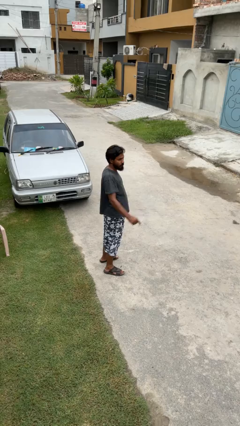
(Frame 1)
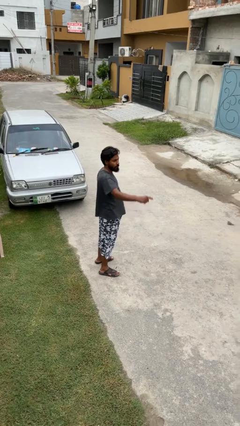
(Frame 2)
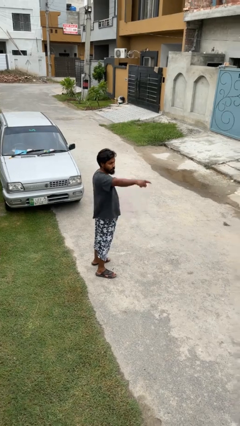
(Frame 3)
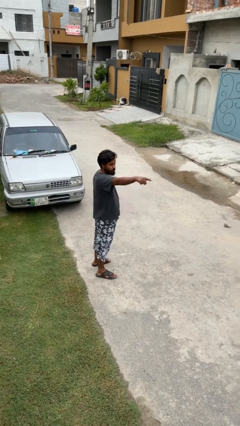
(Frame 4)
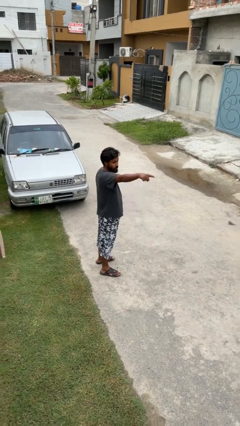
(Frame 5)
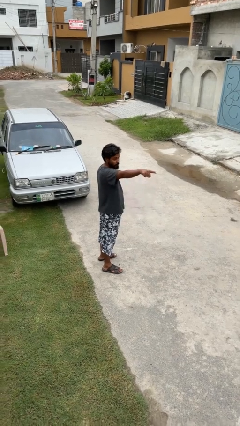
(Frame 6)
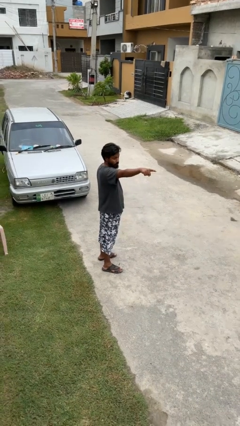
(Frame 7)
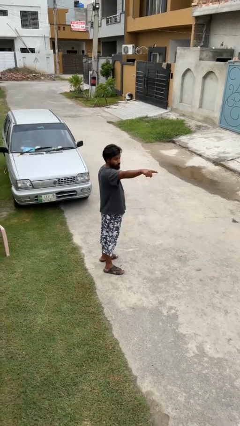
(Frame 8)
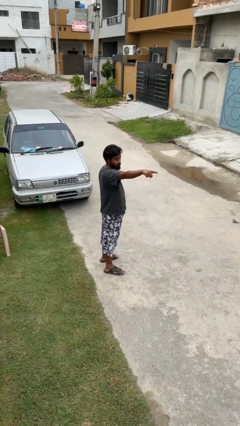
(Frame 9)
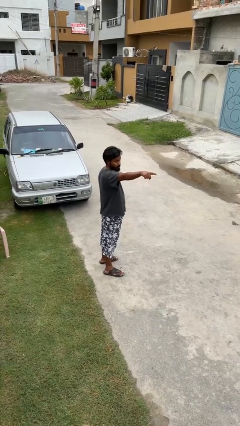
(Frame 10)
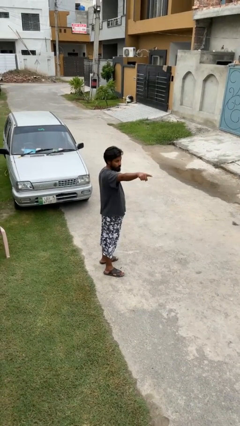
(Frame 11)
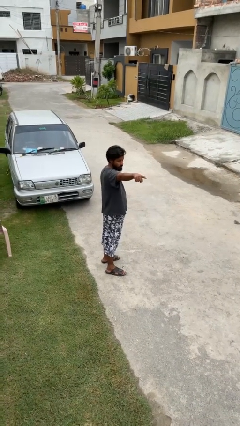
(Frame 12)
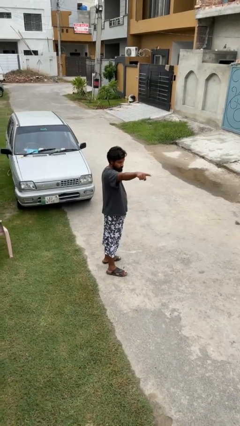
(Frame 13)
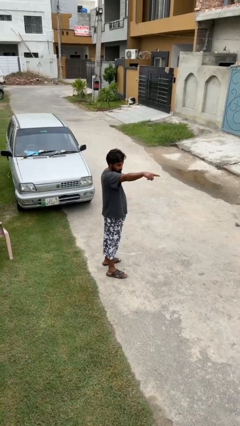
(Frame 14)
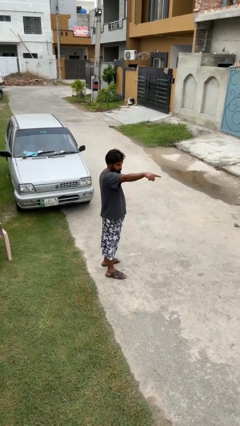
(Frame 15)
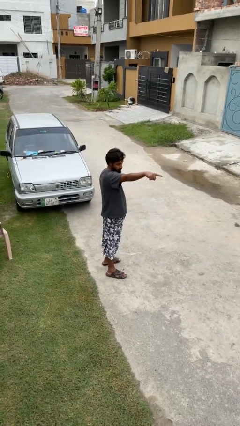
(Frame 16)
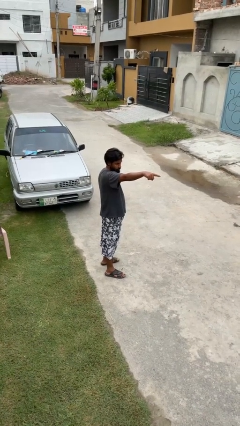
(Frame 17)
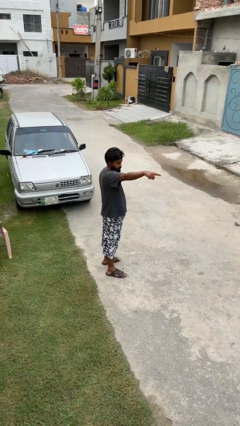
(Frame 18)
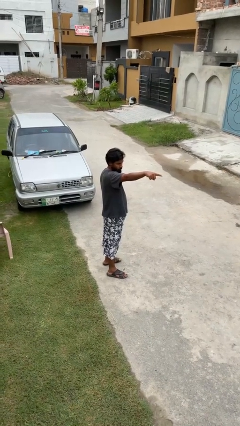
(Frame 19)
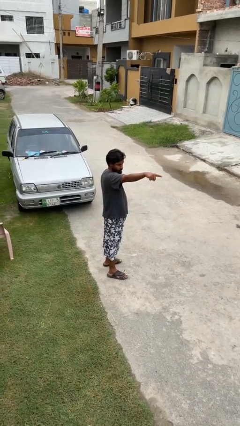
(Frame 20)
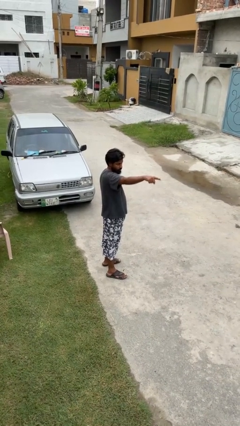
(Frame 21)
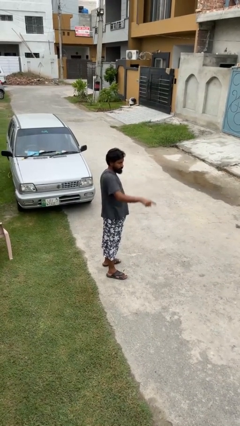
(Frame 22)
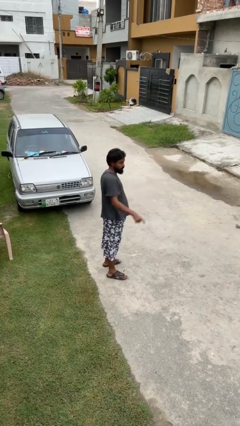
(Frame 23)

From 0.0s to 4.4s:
person points at person

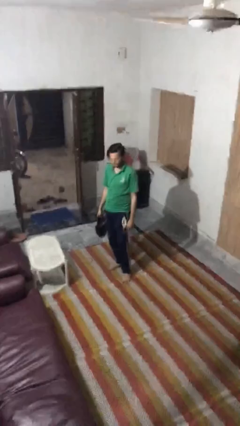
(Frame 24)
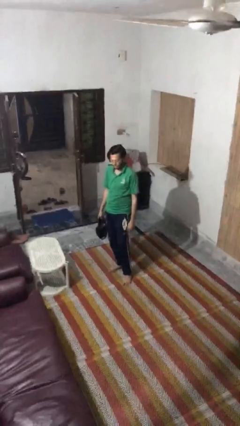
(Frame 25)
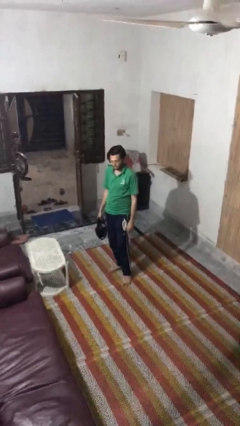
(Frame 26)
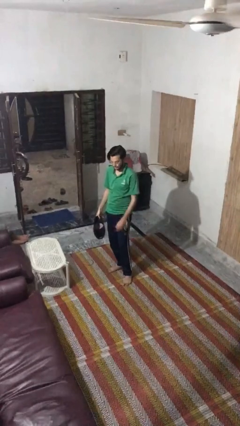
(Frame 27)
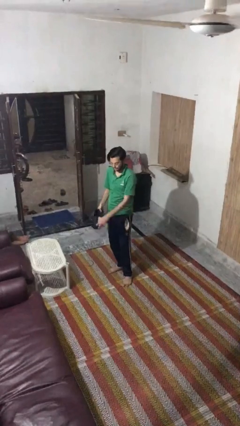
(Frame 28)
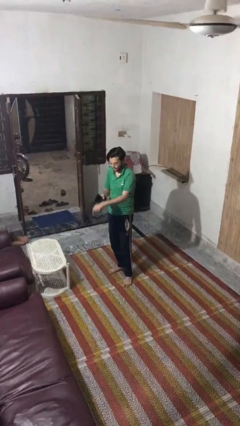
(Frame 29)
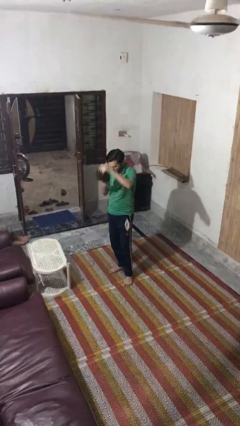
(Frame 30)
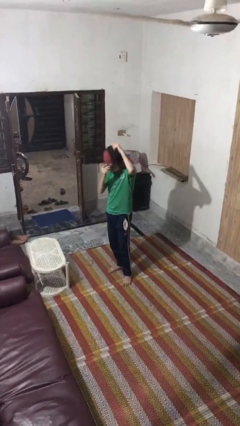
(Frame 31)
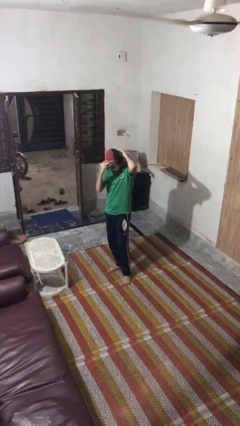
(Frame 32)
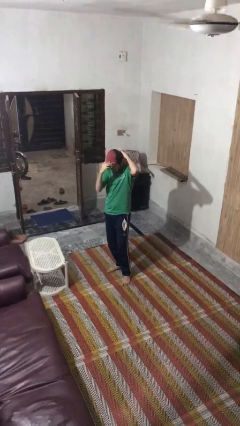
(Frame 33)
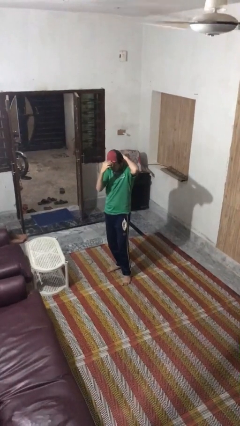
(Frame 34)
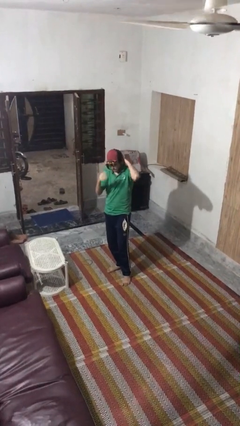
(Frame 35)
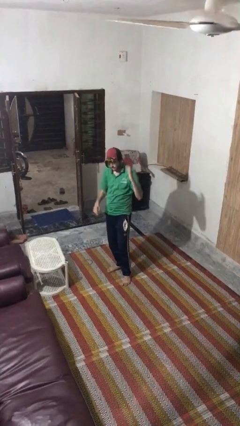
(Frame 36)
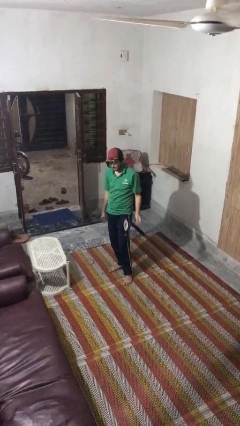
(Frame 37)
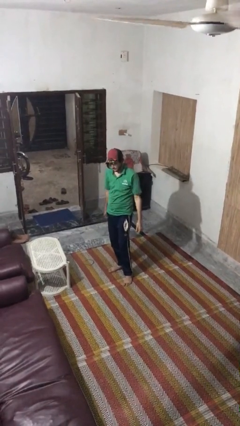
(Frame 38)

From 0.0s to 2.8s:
person puts on hat

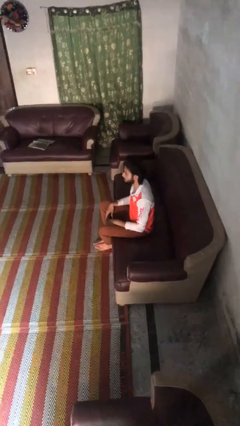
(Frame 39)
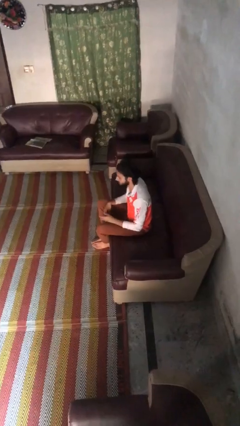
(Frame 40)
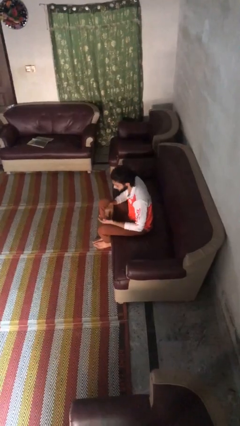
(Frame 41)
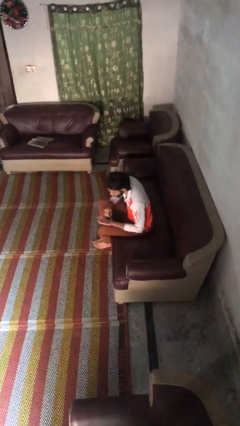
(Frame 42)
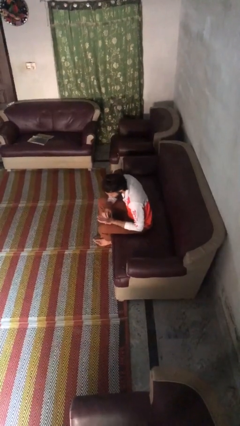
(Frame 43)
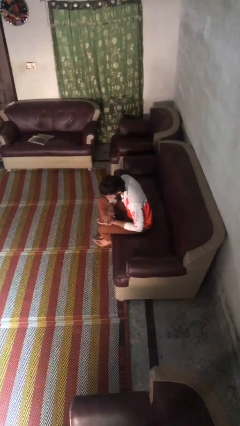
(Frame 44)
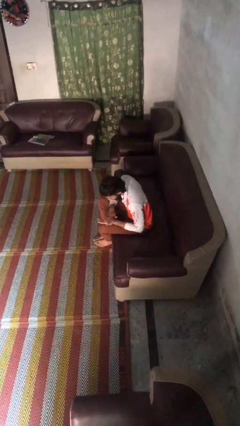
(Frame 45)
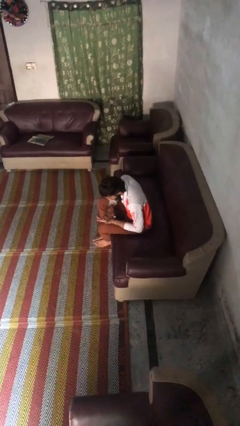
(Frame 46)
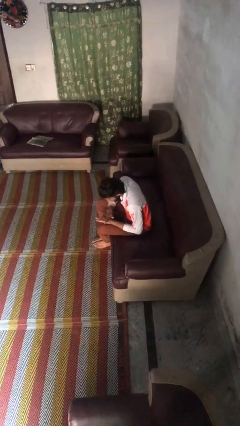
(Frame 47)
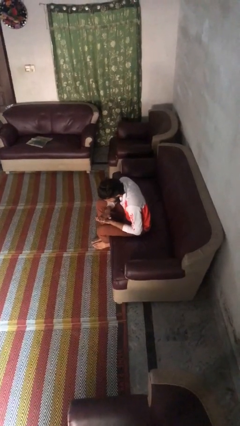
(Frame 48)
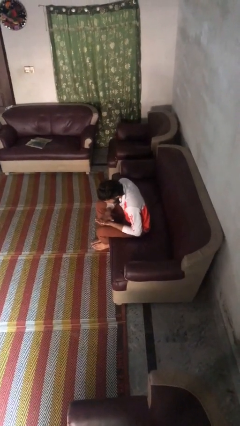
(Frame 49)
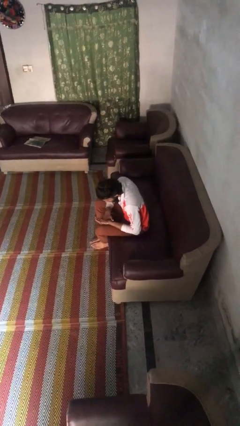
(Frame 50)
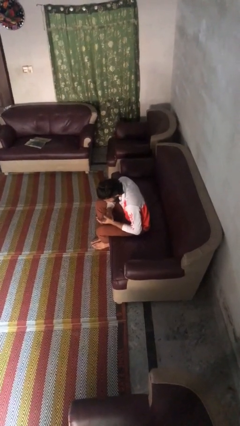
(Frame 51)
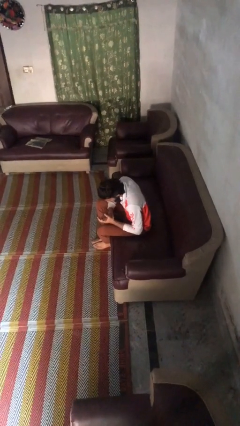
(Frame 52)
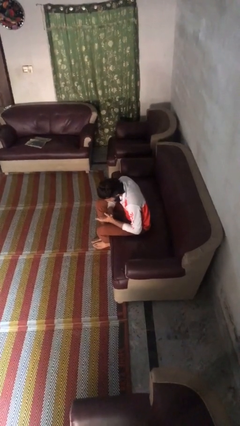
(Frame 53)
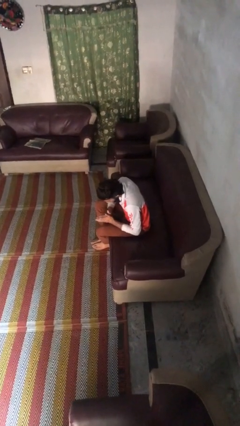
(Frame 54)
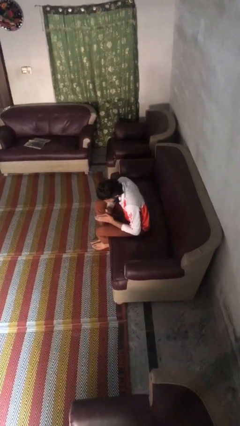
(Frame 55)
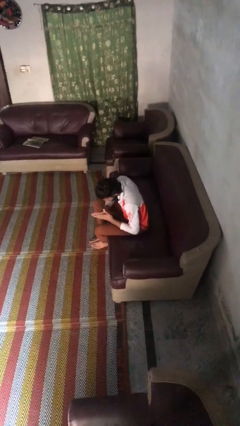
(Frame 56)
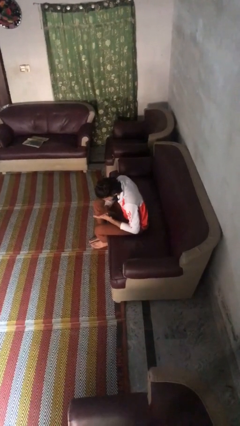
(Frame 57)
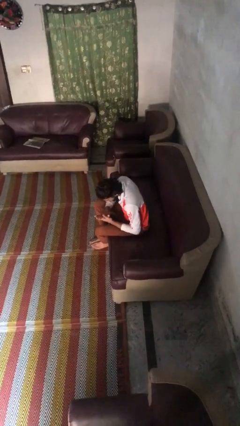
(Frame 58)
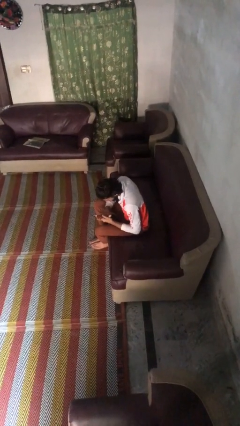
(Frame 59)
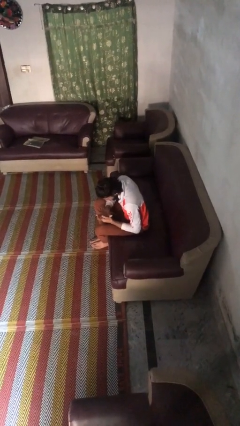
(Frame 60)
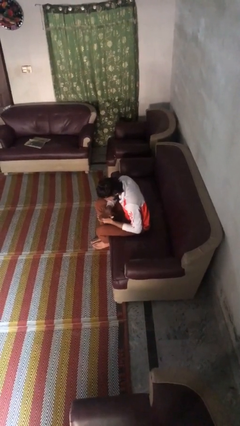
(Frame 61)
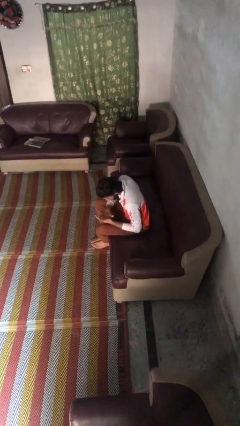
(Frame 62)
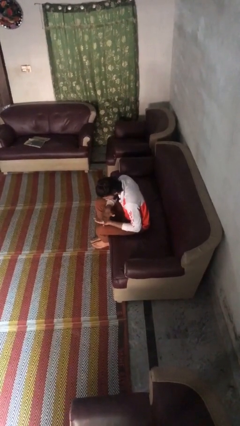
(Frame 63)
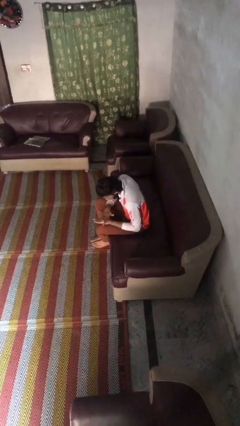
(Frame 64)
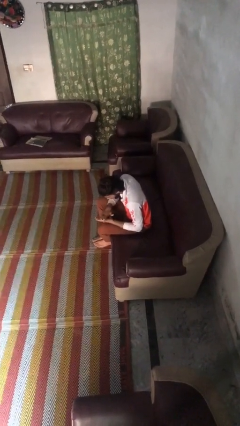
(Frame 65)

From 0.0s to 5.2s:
person looks at hands in lap

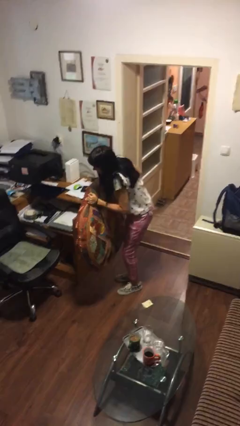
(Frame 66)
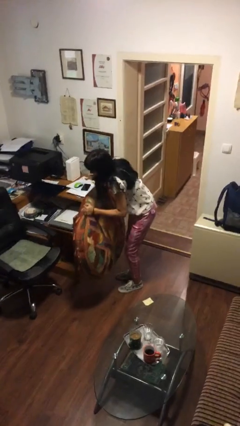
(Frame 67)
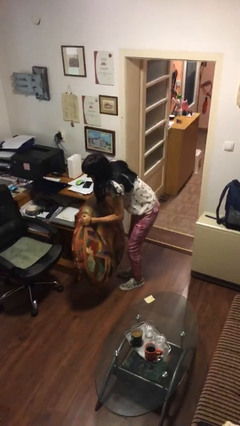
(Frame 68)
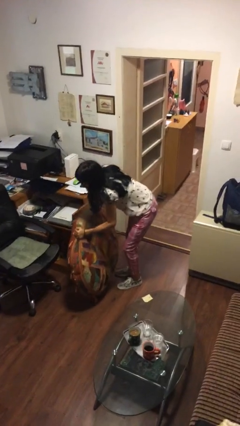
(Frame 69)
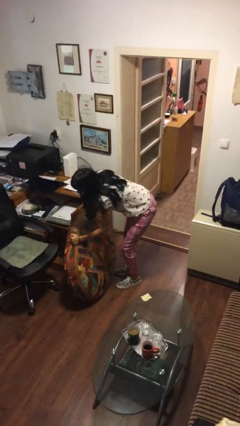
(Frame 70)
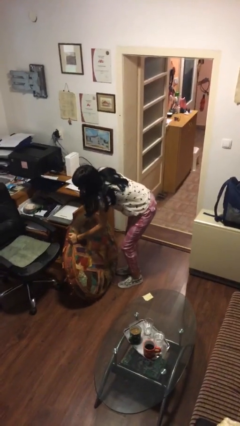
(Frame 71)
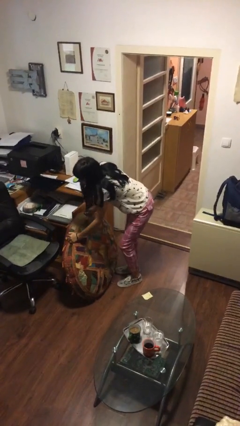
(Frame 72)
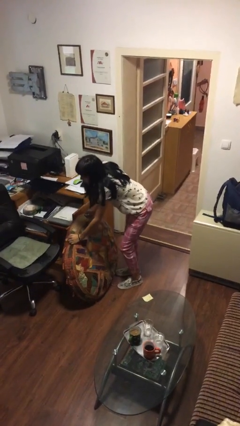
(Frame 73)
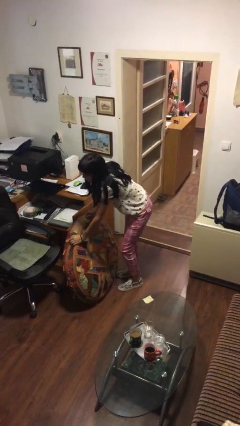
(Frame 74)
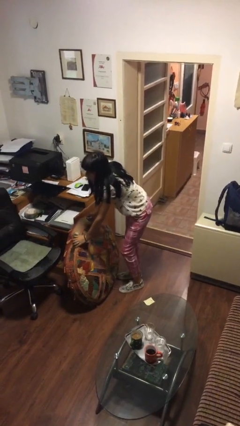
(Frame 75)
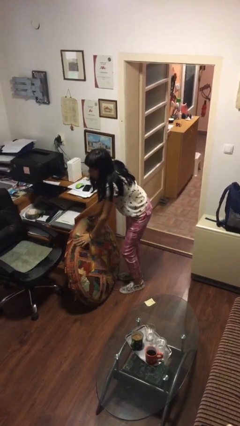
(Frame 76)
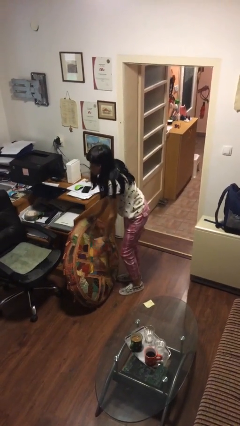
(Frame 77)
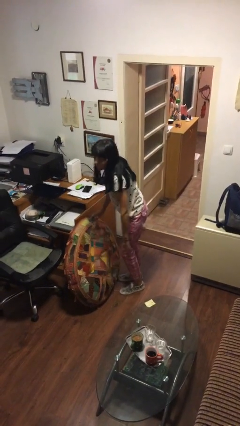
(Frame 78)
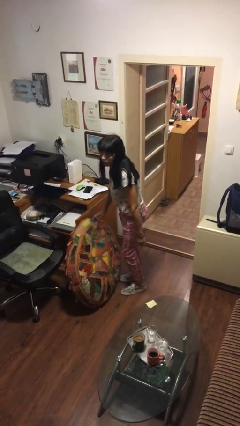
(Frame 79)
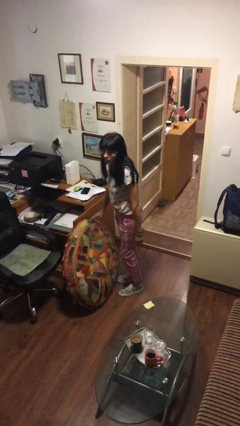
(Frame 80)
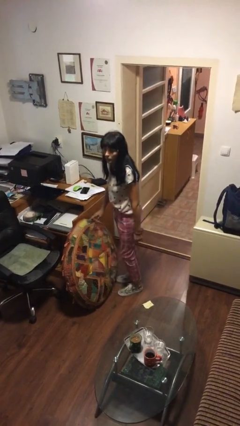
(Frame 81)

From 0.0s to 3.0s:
person puts down object on floor

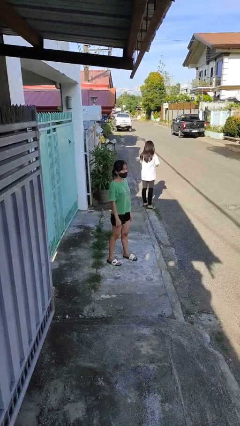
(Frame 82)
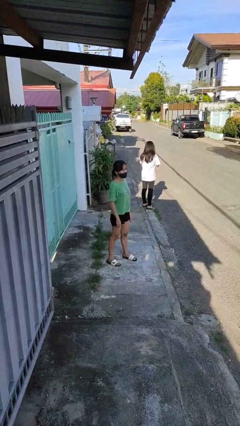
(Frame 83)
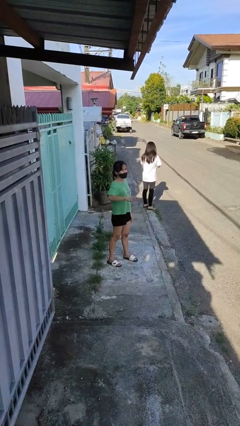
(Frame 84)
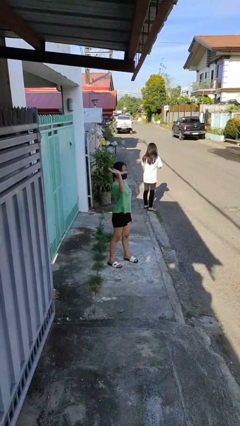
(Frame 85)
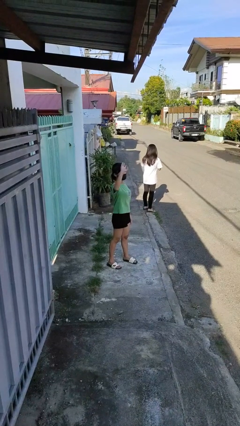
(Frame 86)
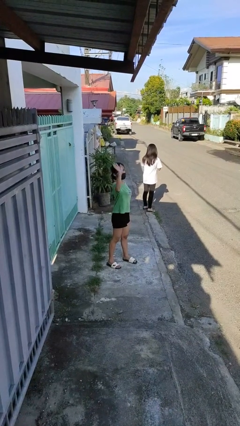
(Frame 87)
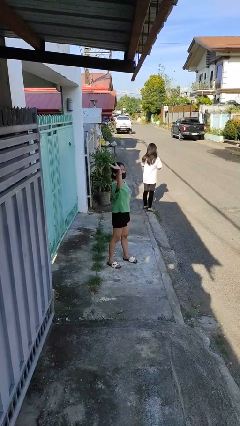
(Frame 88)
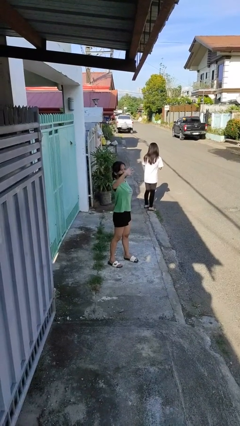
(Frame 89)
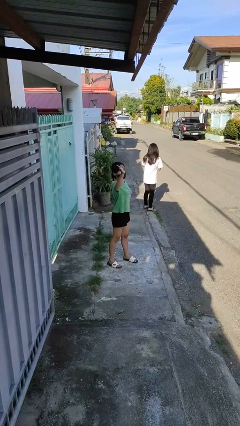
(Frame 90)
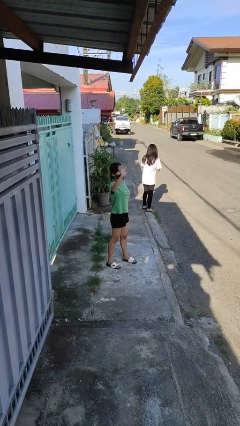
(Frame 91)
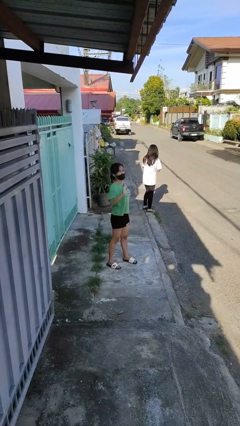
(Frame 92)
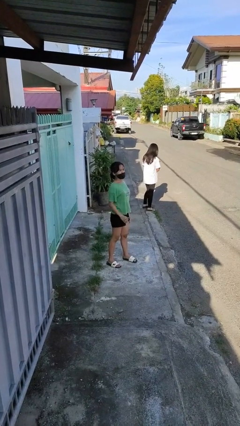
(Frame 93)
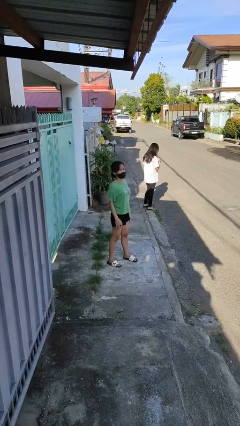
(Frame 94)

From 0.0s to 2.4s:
person waves at person
